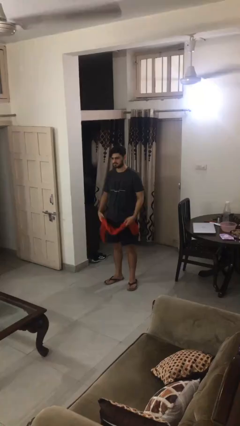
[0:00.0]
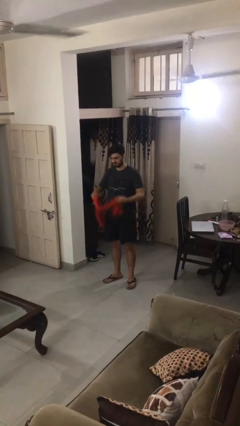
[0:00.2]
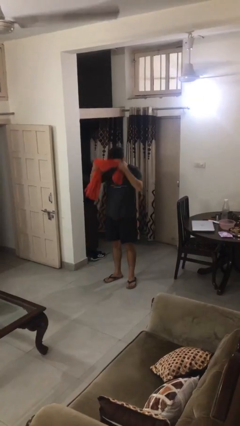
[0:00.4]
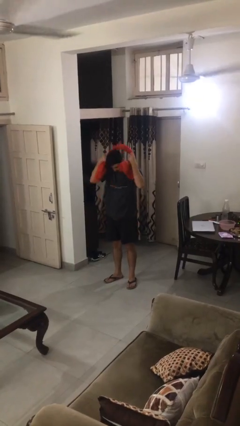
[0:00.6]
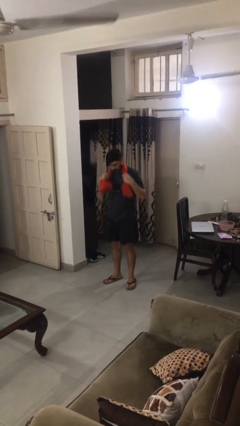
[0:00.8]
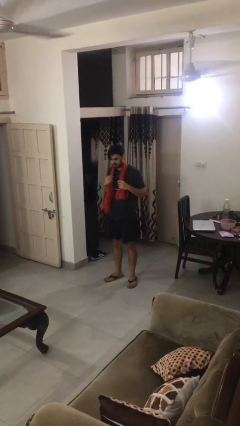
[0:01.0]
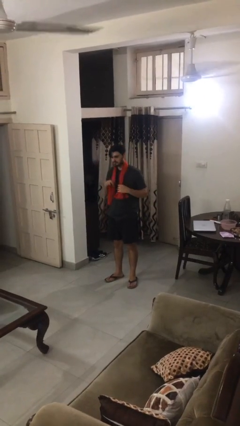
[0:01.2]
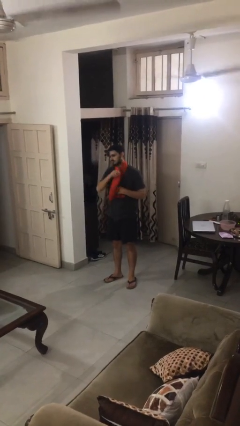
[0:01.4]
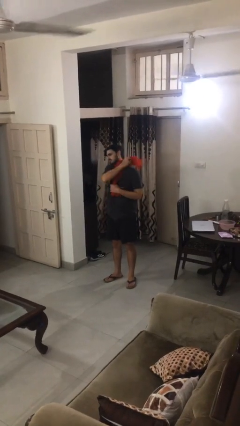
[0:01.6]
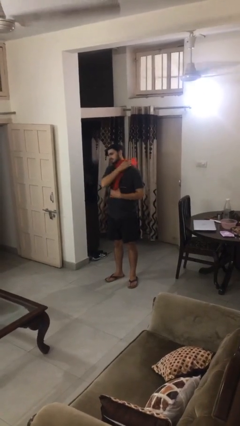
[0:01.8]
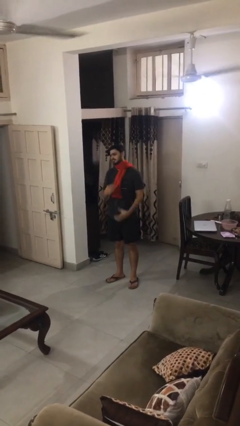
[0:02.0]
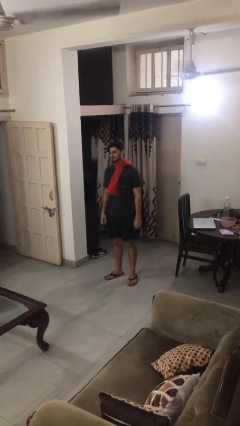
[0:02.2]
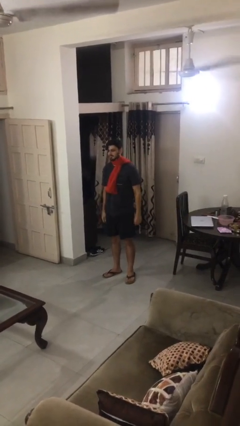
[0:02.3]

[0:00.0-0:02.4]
person puts on scarf

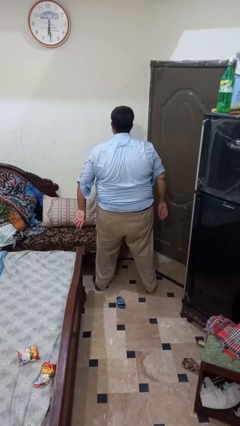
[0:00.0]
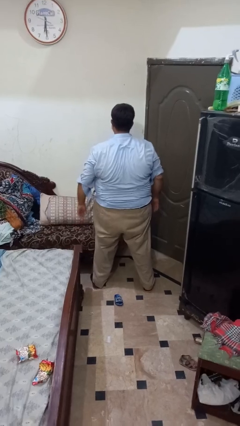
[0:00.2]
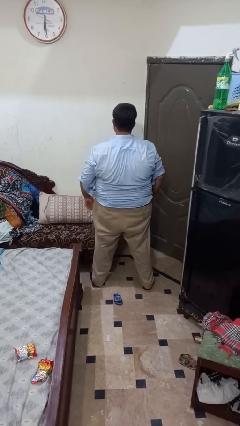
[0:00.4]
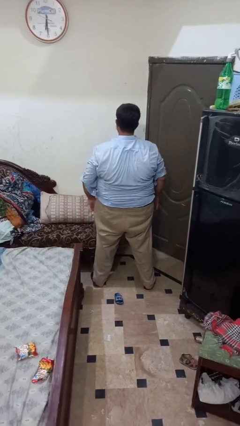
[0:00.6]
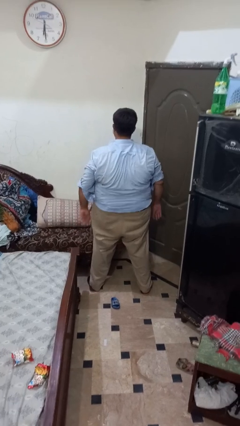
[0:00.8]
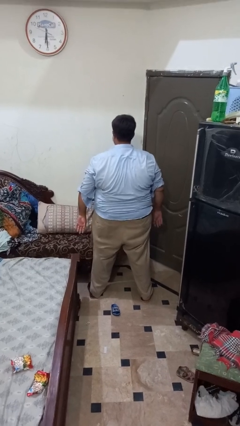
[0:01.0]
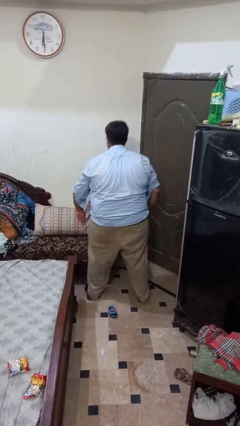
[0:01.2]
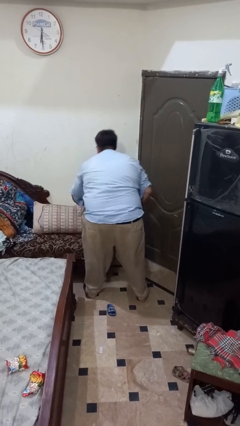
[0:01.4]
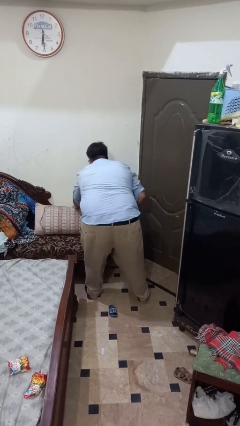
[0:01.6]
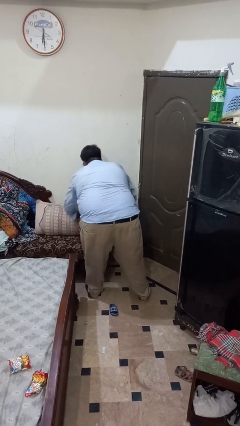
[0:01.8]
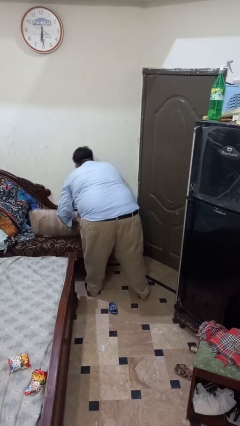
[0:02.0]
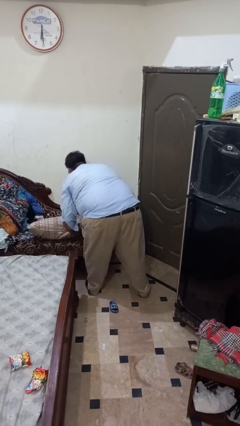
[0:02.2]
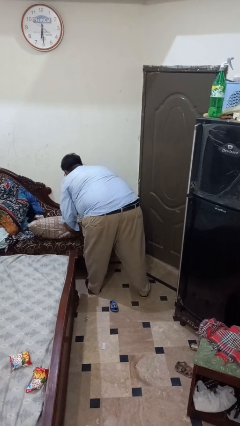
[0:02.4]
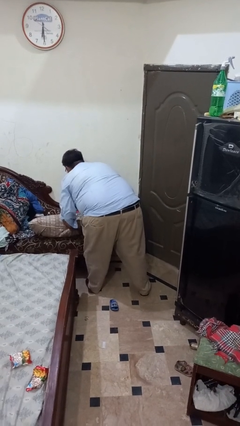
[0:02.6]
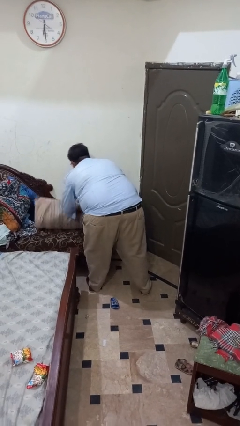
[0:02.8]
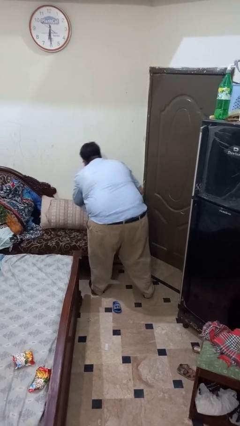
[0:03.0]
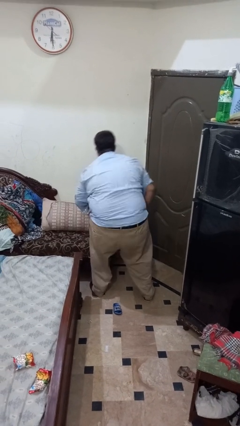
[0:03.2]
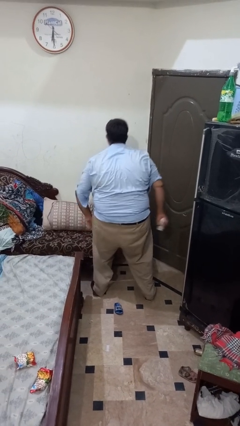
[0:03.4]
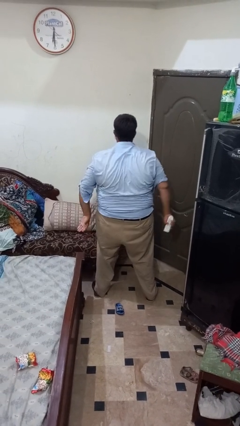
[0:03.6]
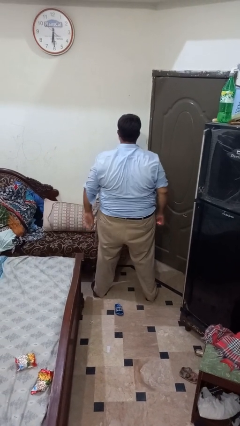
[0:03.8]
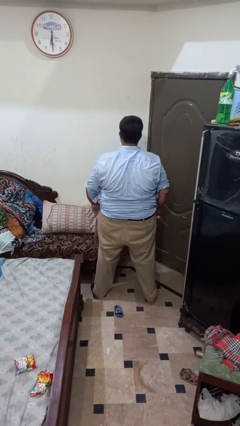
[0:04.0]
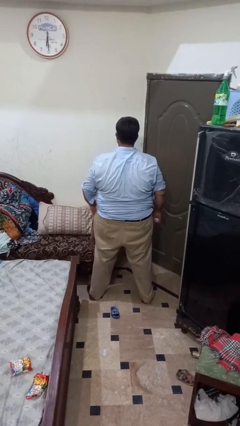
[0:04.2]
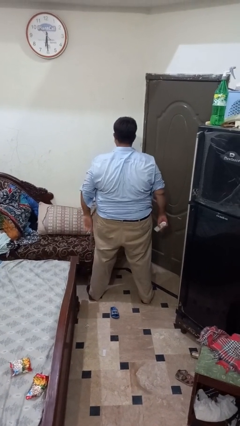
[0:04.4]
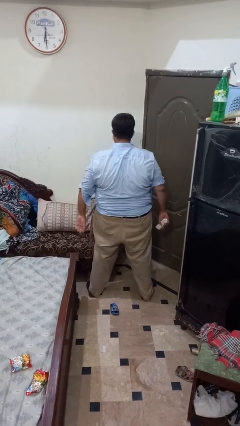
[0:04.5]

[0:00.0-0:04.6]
person searches in couch

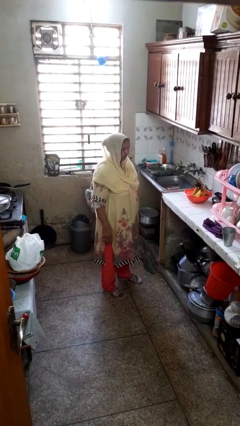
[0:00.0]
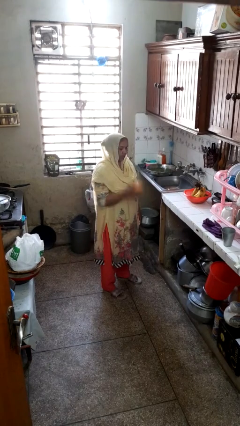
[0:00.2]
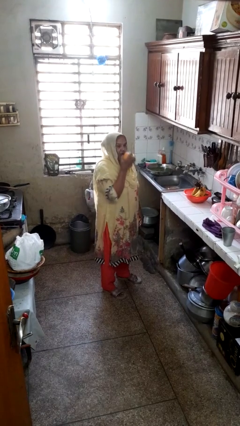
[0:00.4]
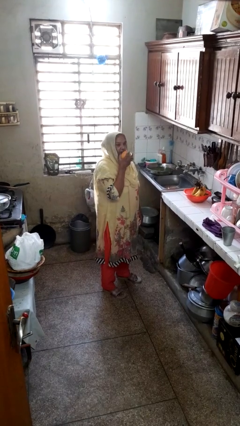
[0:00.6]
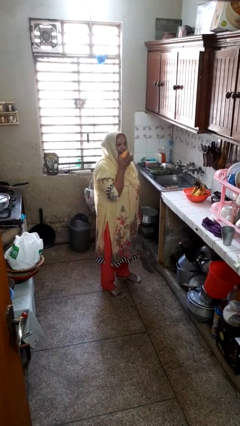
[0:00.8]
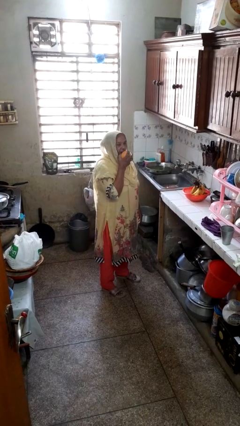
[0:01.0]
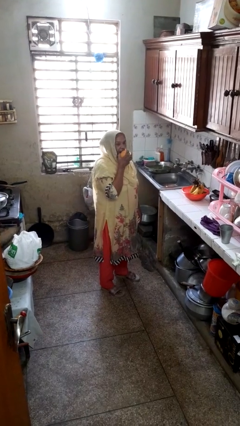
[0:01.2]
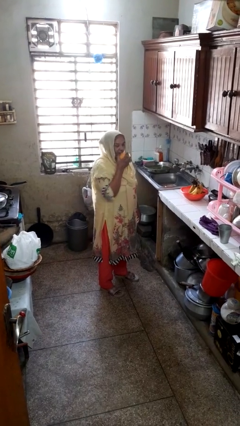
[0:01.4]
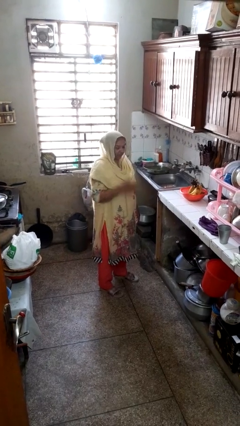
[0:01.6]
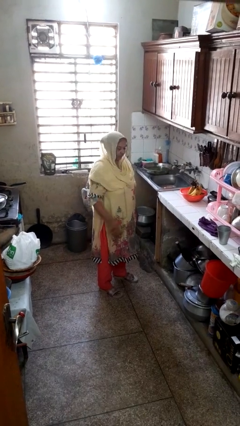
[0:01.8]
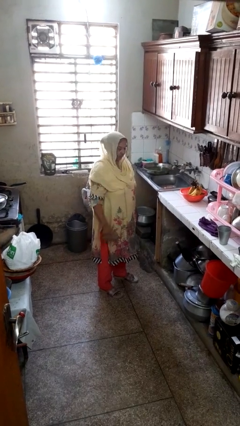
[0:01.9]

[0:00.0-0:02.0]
person eats apple

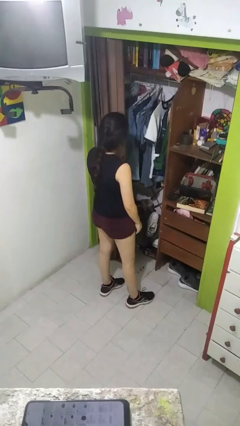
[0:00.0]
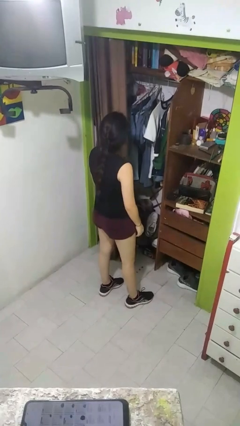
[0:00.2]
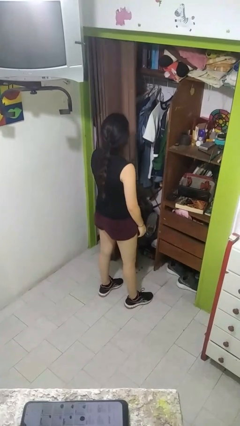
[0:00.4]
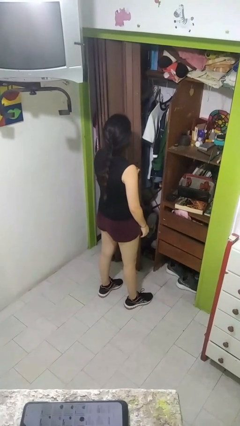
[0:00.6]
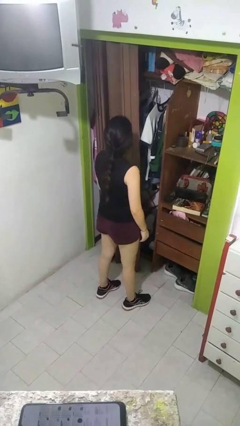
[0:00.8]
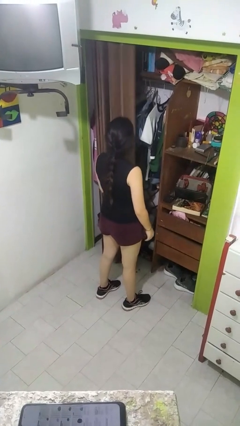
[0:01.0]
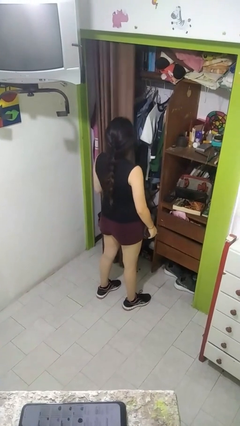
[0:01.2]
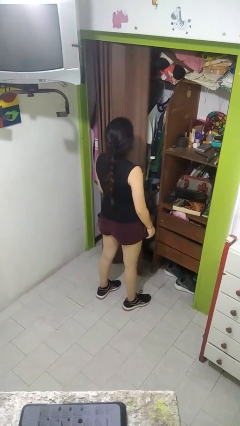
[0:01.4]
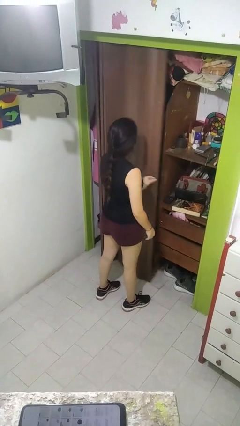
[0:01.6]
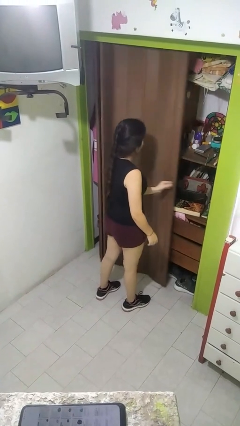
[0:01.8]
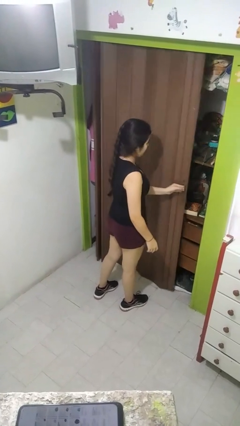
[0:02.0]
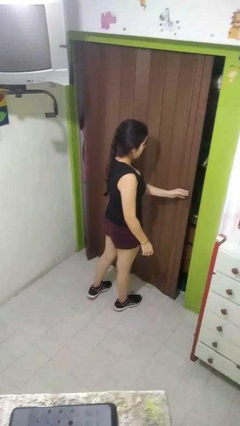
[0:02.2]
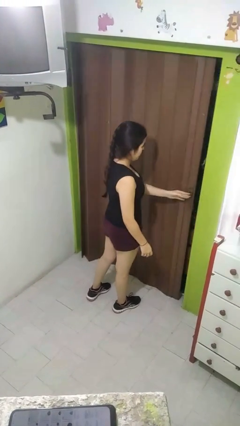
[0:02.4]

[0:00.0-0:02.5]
person closes closet door

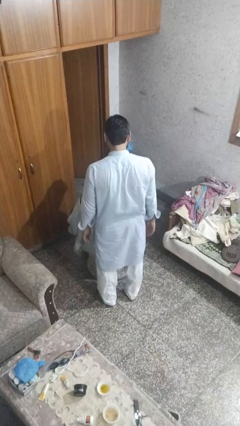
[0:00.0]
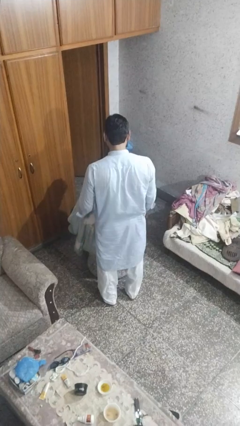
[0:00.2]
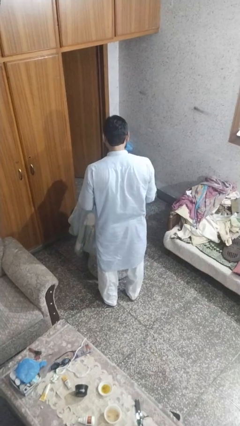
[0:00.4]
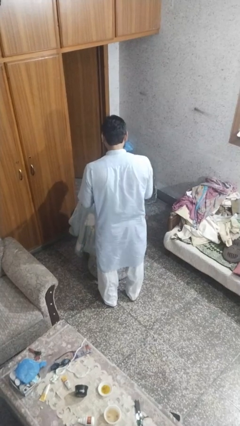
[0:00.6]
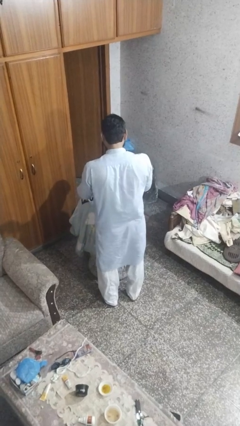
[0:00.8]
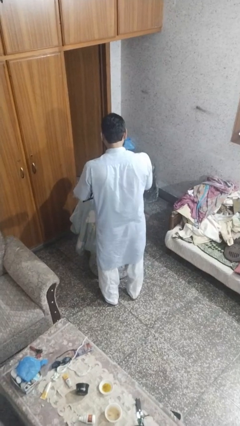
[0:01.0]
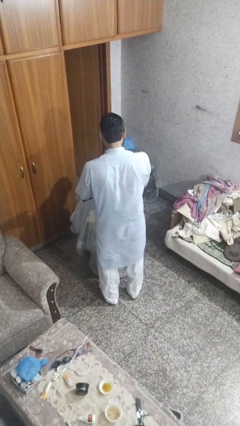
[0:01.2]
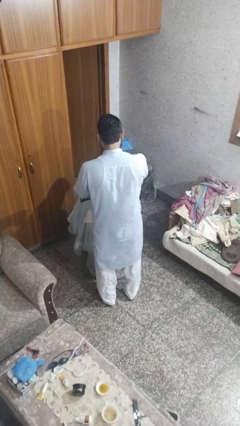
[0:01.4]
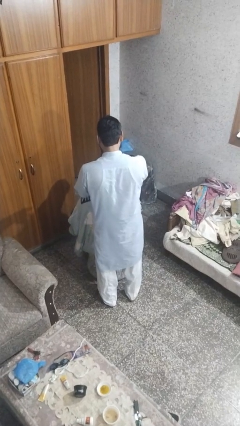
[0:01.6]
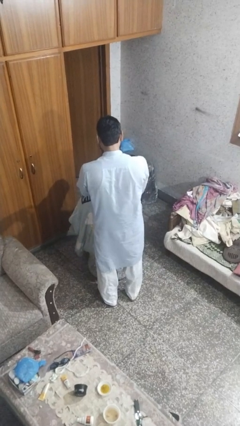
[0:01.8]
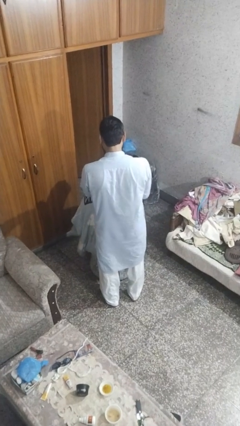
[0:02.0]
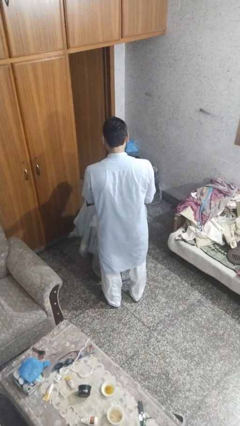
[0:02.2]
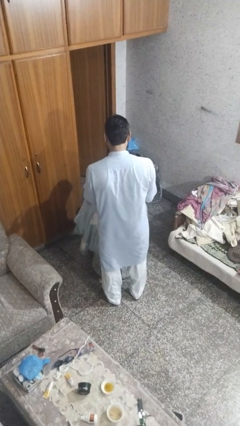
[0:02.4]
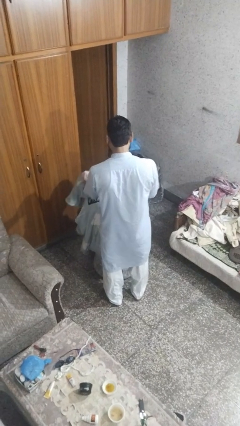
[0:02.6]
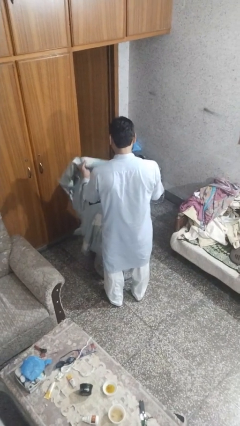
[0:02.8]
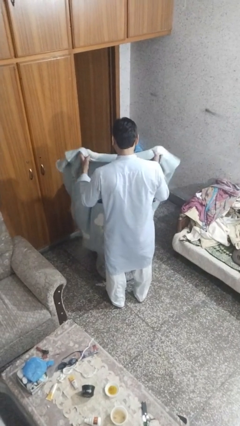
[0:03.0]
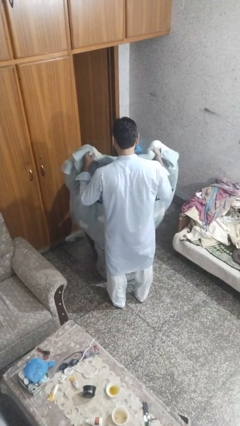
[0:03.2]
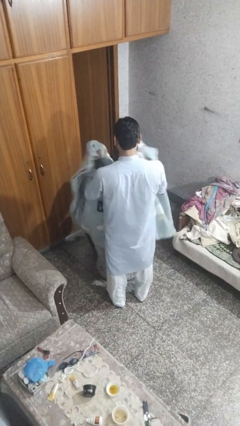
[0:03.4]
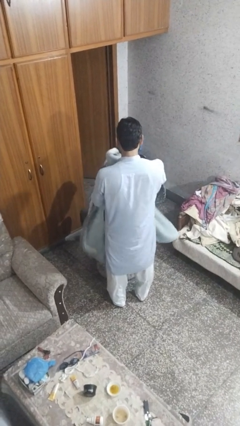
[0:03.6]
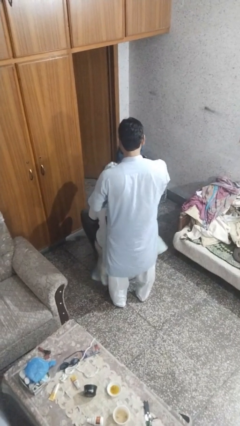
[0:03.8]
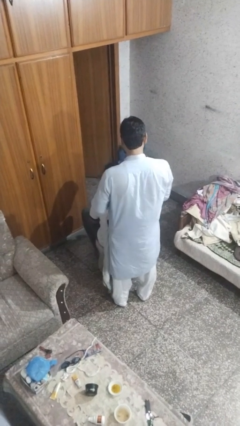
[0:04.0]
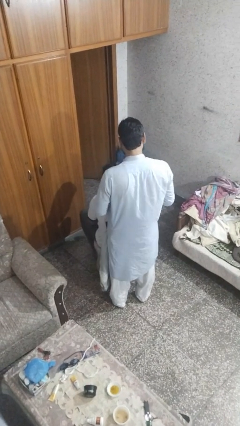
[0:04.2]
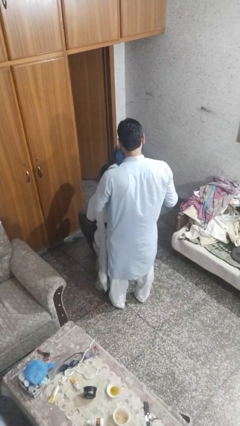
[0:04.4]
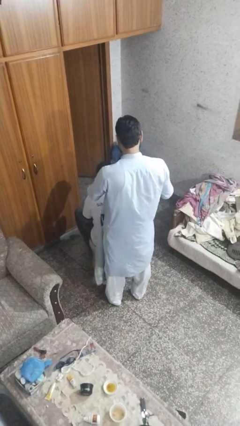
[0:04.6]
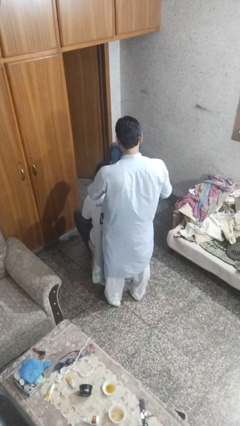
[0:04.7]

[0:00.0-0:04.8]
person uncovers friend with blanket

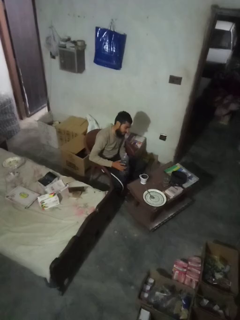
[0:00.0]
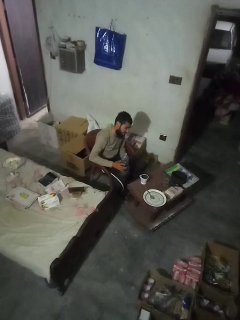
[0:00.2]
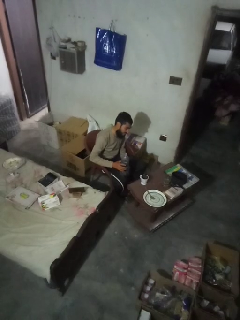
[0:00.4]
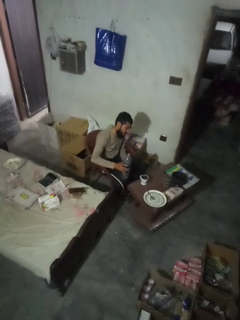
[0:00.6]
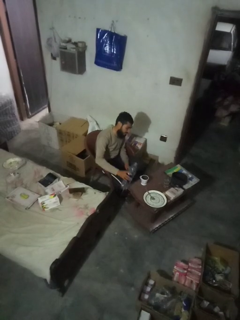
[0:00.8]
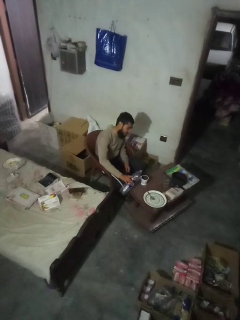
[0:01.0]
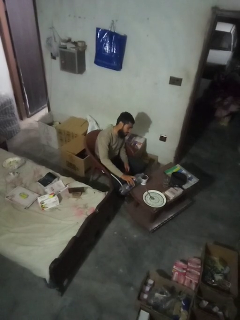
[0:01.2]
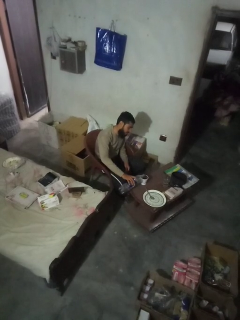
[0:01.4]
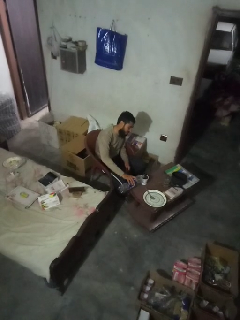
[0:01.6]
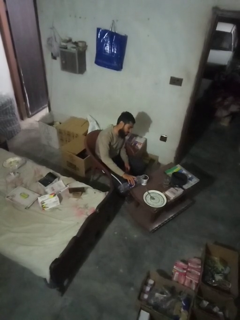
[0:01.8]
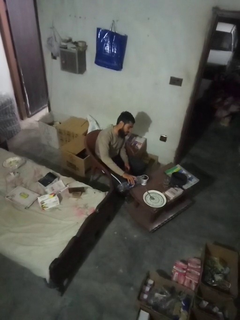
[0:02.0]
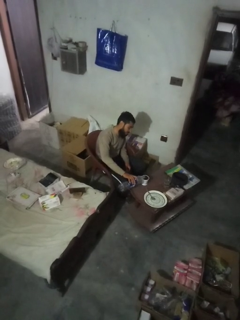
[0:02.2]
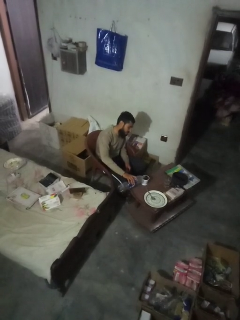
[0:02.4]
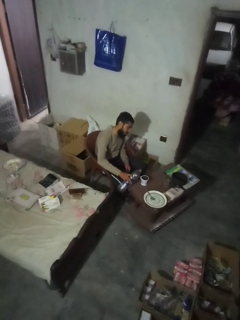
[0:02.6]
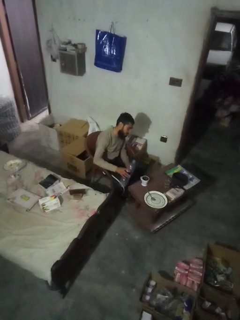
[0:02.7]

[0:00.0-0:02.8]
person pours liquid into cup
